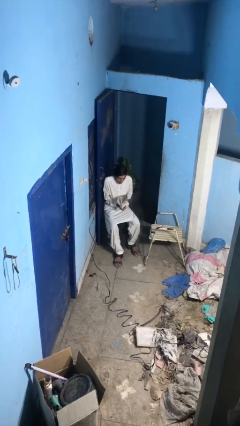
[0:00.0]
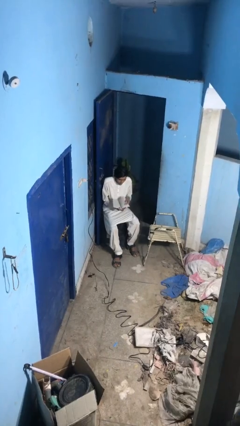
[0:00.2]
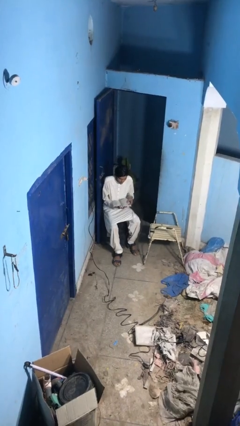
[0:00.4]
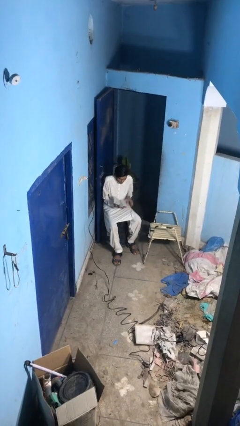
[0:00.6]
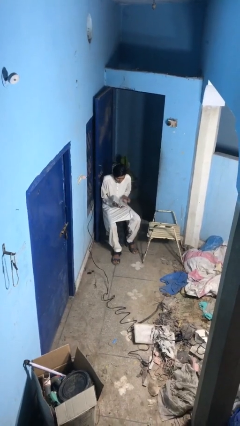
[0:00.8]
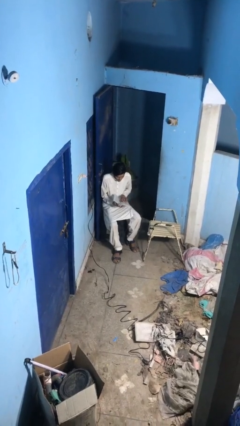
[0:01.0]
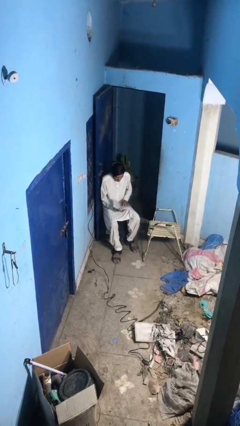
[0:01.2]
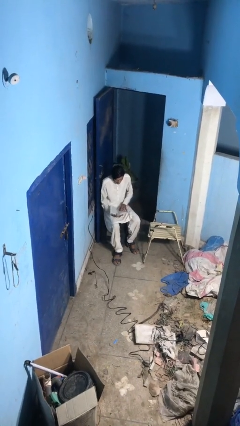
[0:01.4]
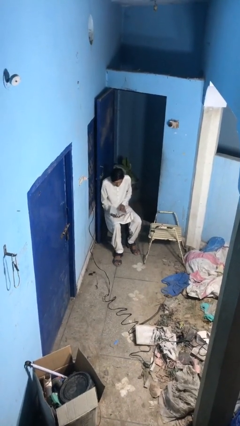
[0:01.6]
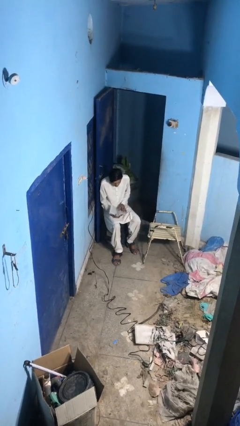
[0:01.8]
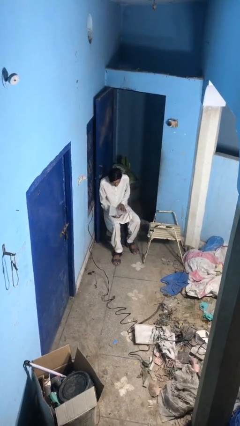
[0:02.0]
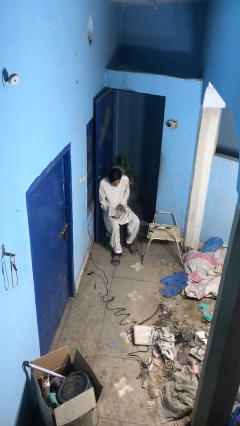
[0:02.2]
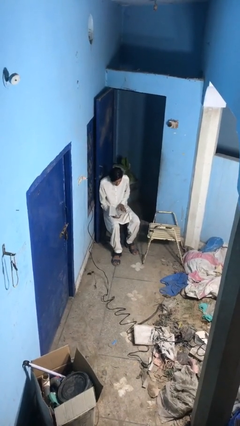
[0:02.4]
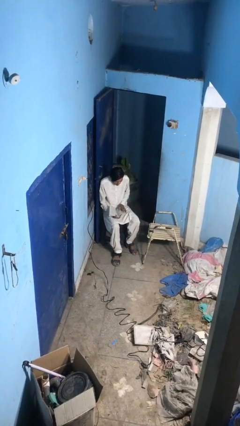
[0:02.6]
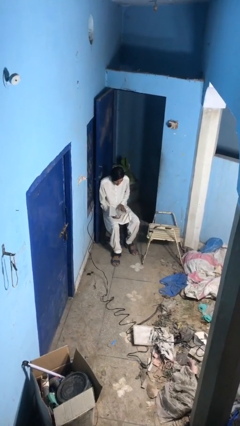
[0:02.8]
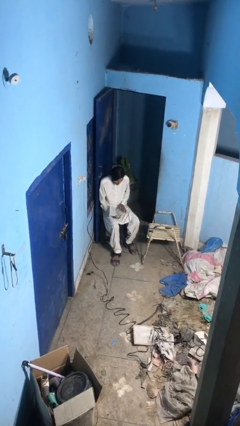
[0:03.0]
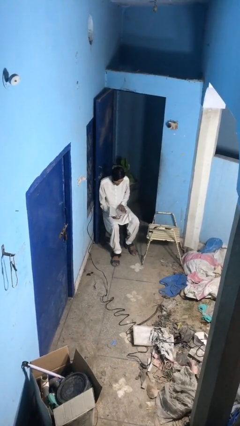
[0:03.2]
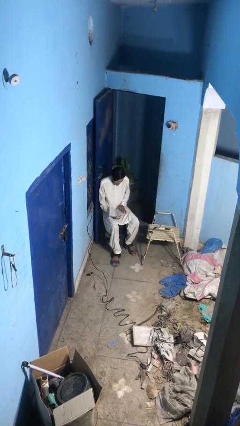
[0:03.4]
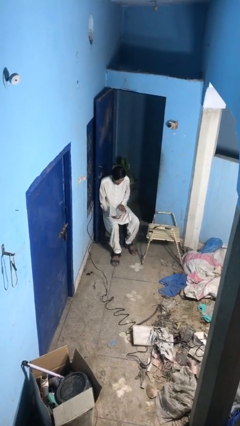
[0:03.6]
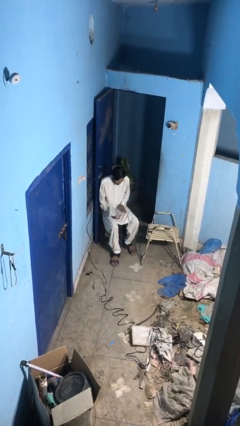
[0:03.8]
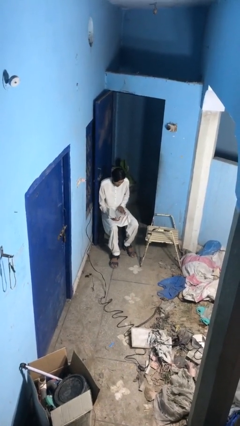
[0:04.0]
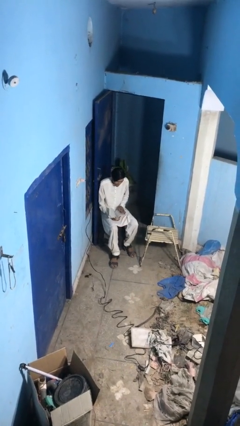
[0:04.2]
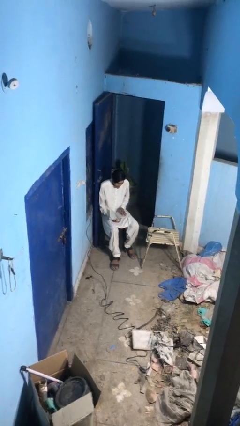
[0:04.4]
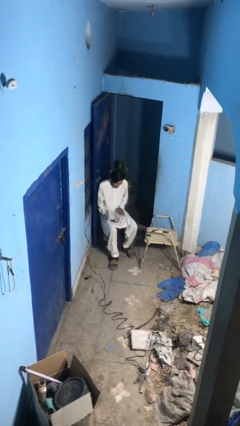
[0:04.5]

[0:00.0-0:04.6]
person reads document

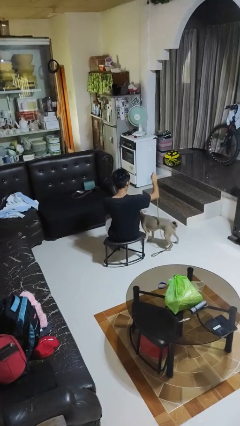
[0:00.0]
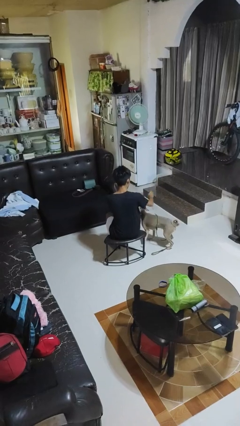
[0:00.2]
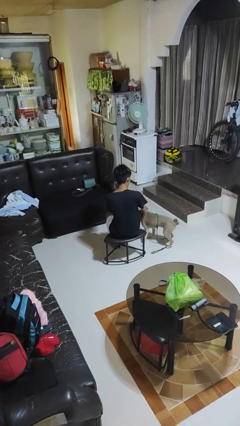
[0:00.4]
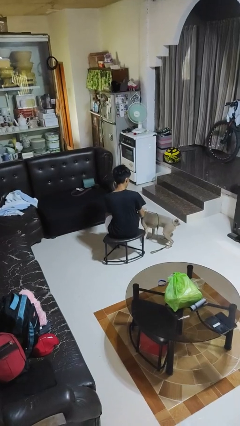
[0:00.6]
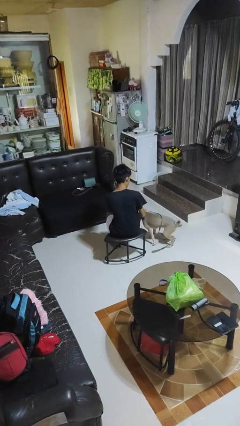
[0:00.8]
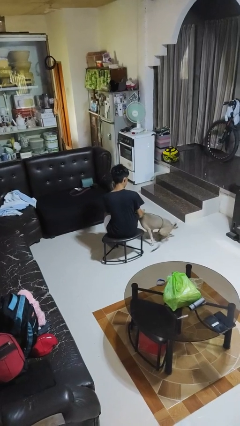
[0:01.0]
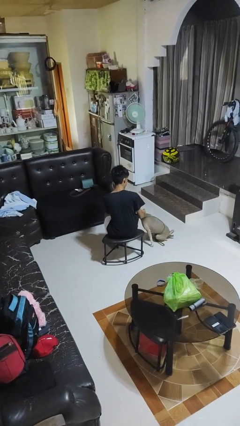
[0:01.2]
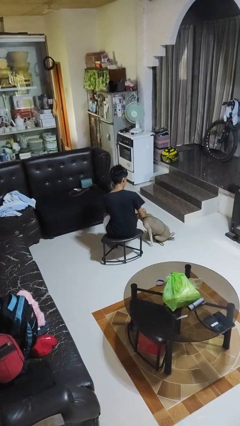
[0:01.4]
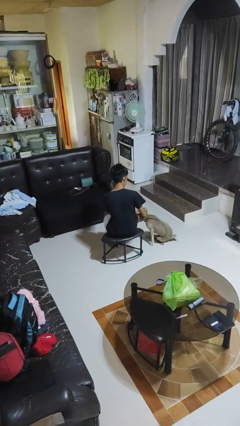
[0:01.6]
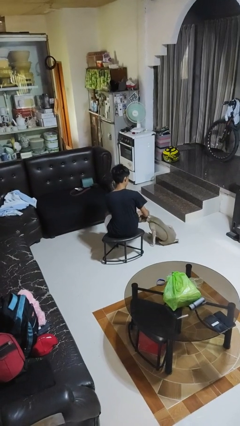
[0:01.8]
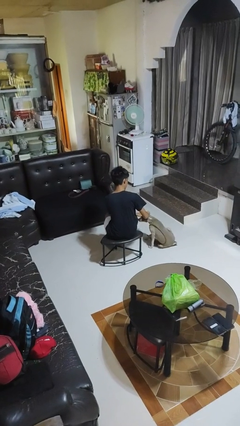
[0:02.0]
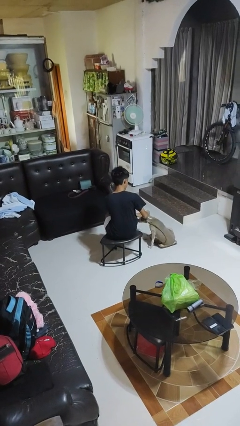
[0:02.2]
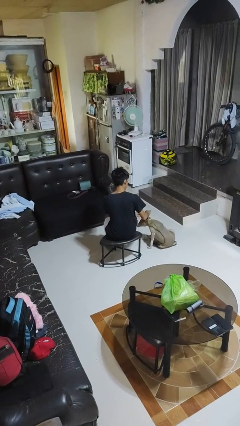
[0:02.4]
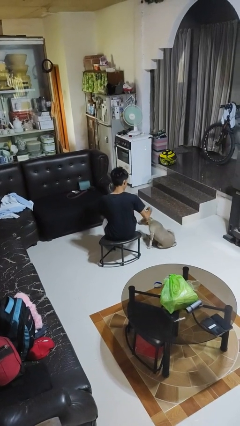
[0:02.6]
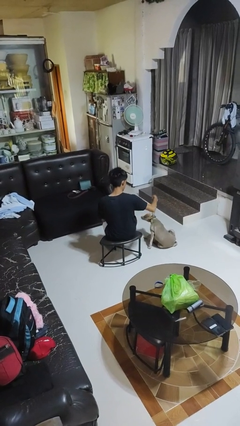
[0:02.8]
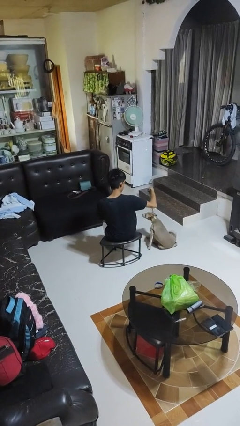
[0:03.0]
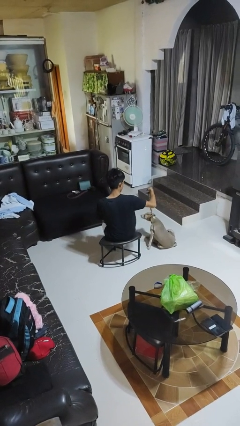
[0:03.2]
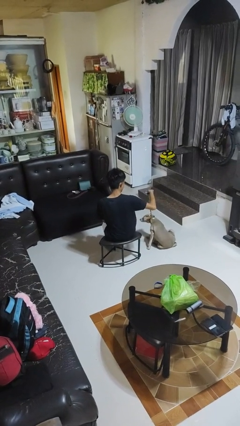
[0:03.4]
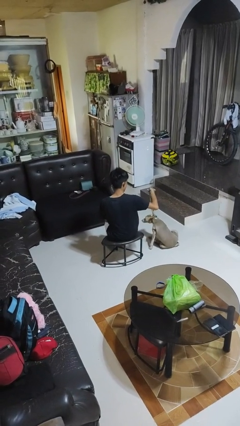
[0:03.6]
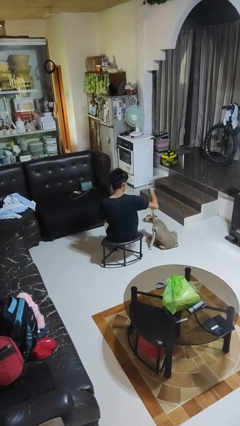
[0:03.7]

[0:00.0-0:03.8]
person attaches leash to dog

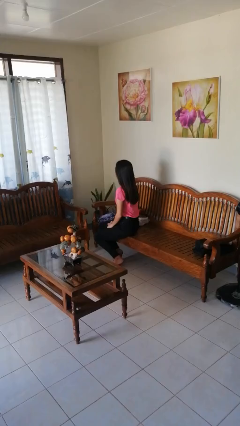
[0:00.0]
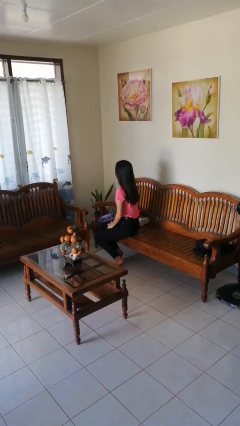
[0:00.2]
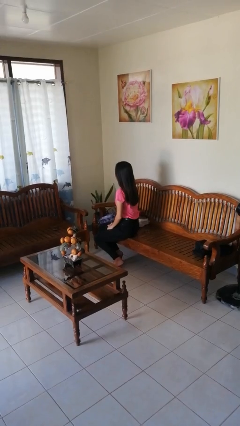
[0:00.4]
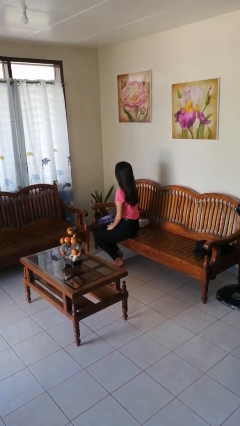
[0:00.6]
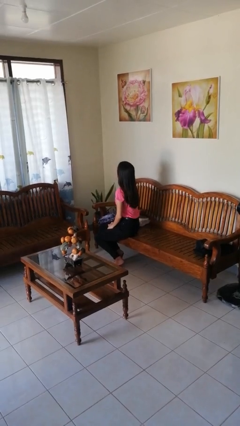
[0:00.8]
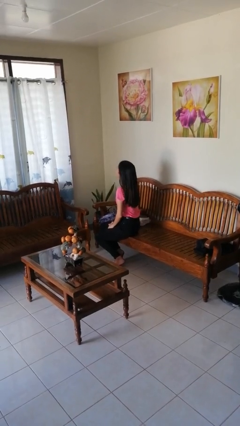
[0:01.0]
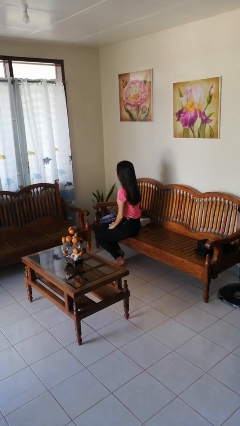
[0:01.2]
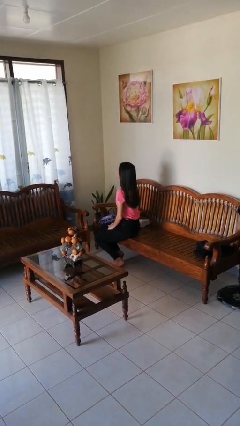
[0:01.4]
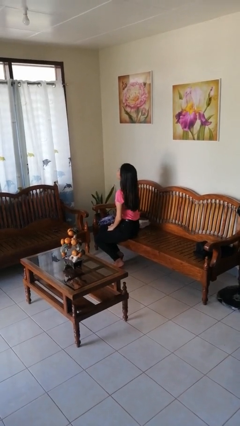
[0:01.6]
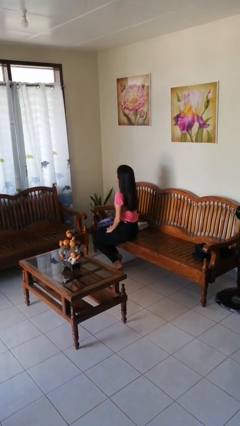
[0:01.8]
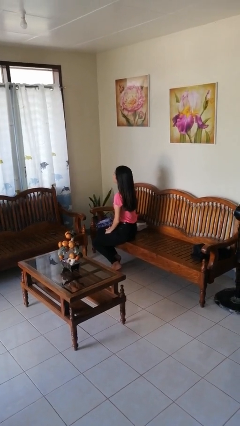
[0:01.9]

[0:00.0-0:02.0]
person nods head

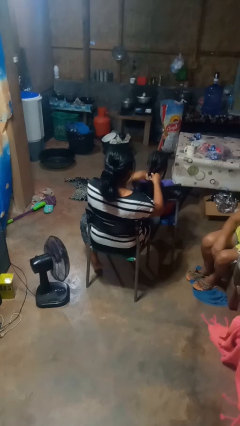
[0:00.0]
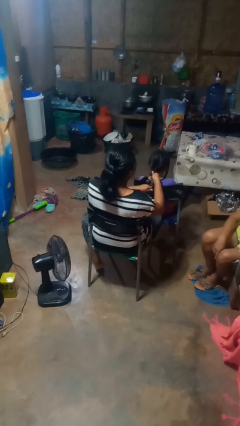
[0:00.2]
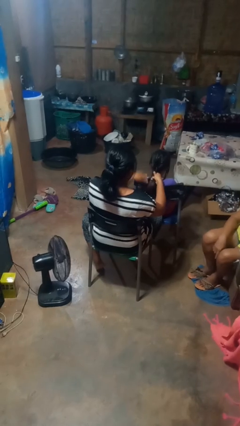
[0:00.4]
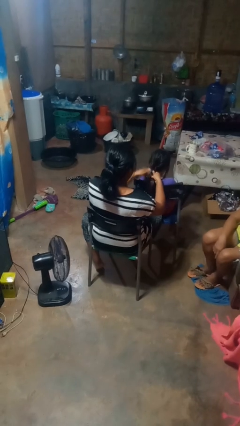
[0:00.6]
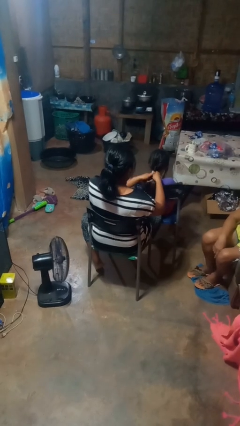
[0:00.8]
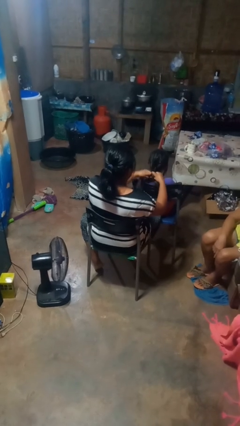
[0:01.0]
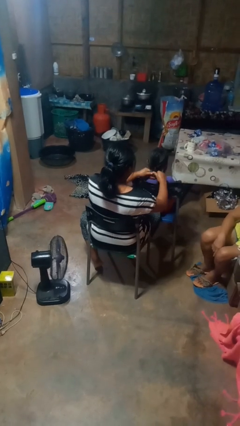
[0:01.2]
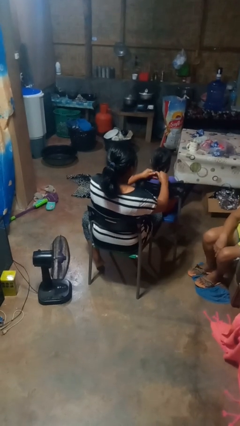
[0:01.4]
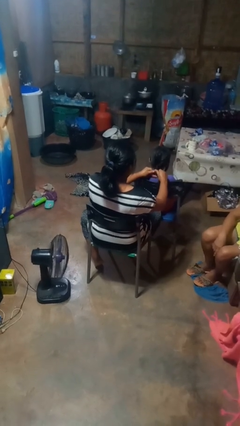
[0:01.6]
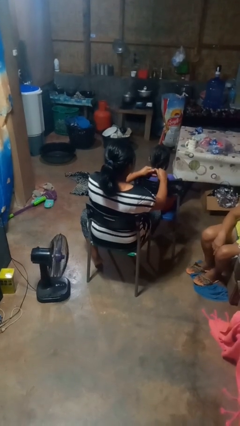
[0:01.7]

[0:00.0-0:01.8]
person braids hair of person

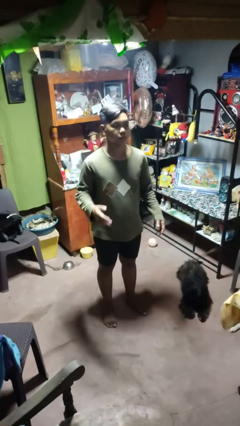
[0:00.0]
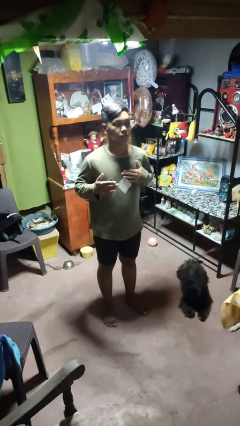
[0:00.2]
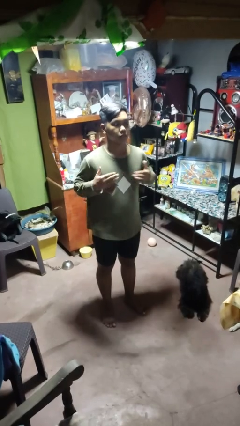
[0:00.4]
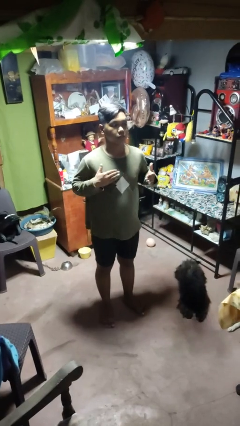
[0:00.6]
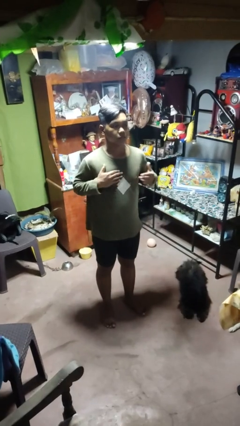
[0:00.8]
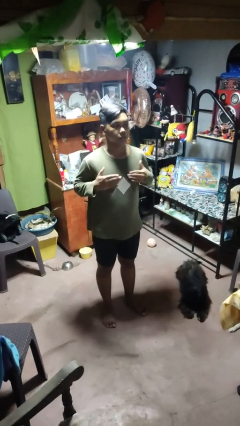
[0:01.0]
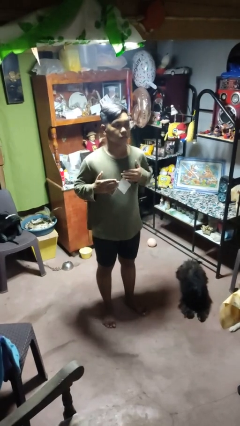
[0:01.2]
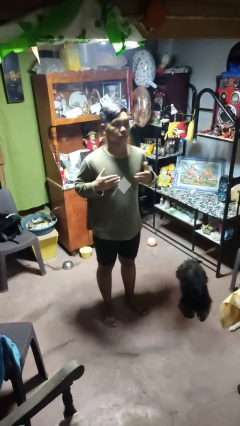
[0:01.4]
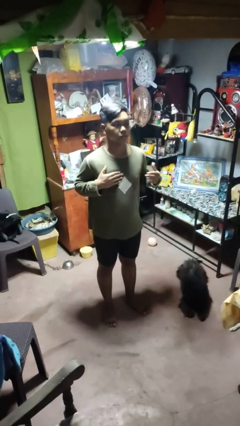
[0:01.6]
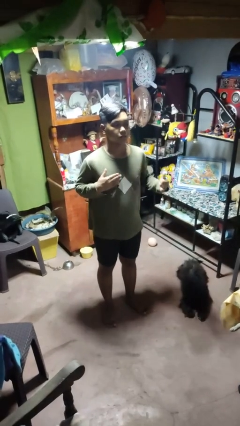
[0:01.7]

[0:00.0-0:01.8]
person drums on chest

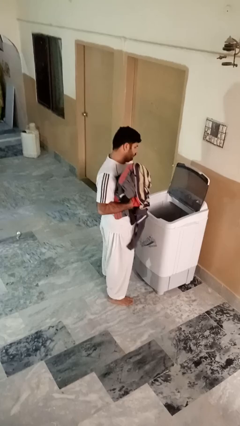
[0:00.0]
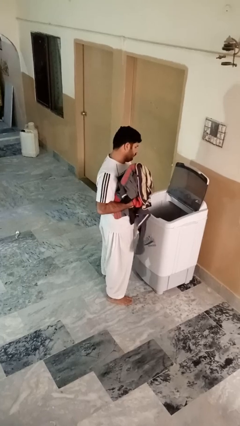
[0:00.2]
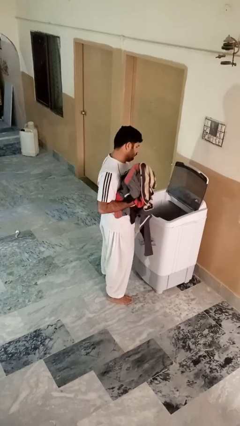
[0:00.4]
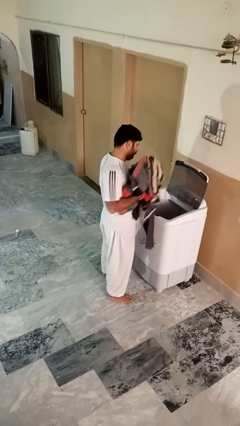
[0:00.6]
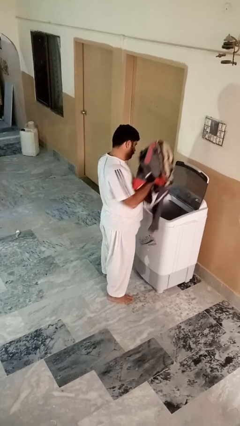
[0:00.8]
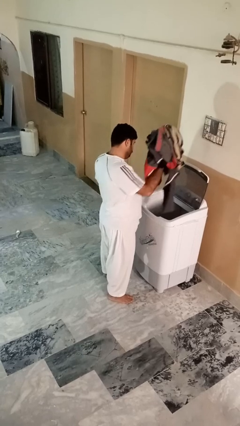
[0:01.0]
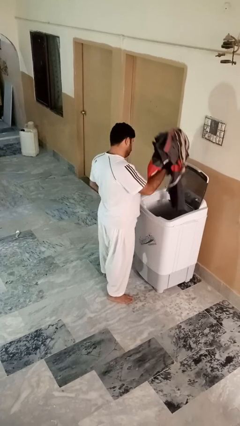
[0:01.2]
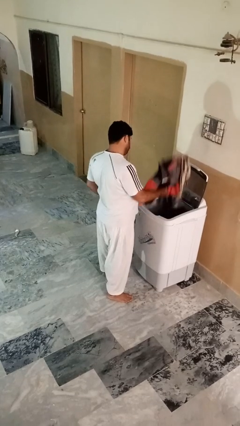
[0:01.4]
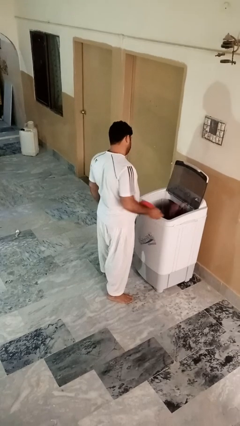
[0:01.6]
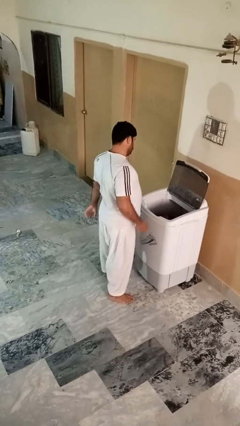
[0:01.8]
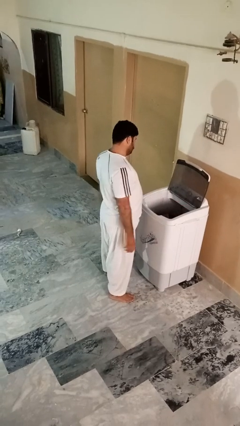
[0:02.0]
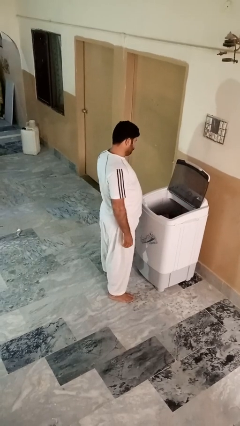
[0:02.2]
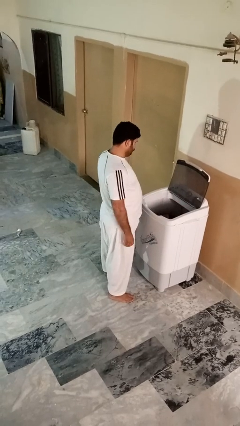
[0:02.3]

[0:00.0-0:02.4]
person loads clotheswasher

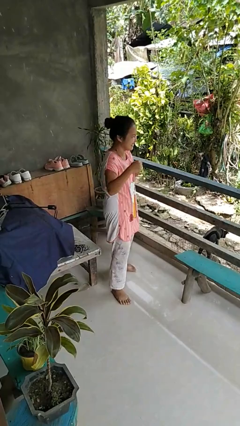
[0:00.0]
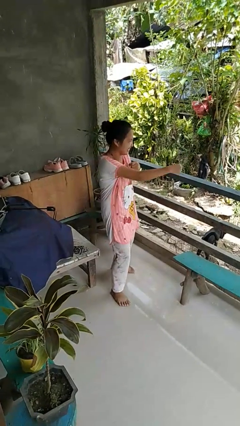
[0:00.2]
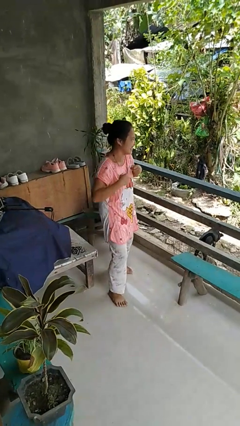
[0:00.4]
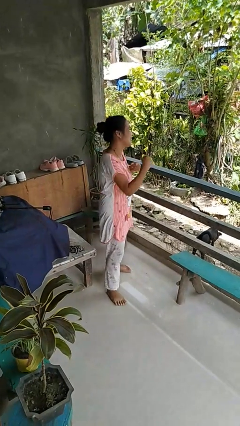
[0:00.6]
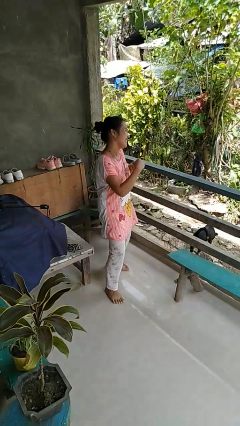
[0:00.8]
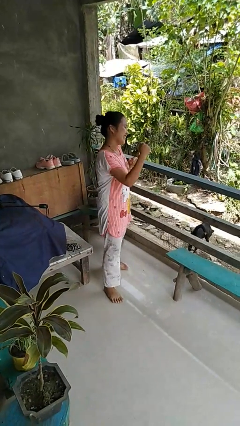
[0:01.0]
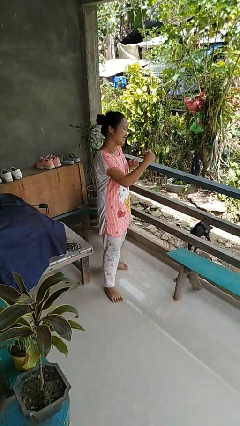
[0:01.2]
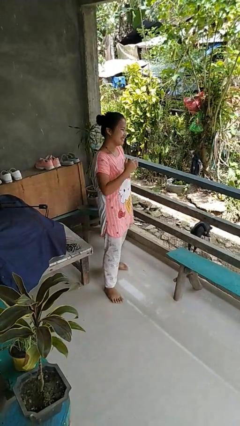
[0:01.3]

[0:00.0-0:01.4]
person punches
